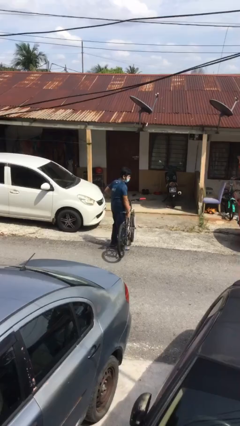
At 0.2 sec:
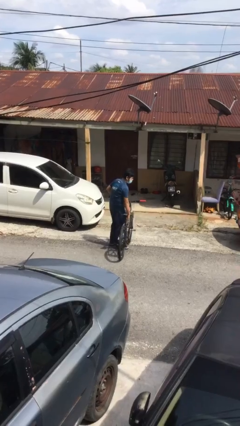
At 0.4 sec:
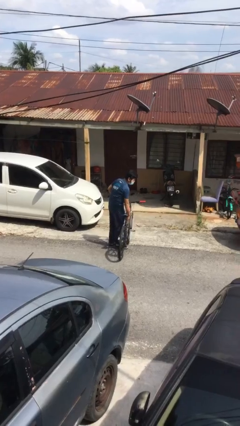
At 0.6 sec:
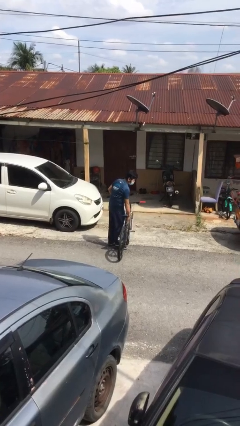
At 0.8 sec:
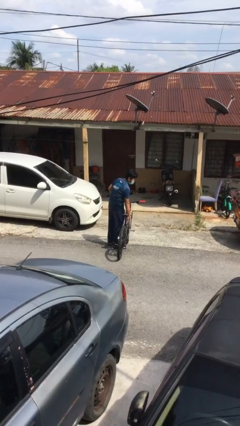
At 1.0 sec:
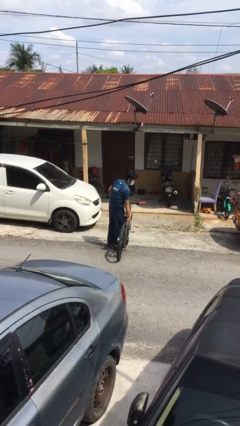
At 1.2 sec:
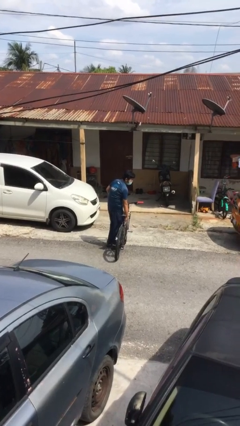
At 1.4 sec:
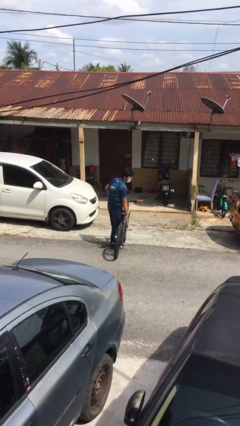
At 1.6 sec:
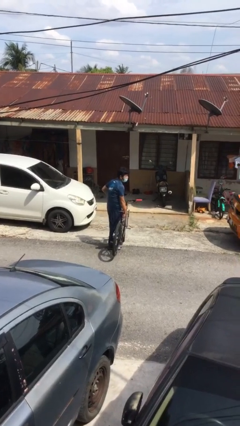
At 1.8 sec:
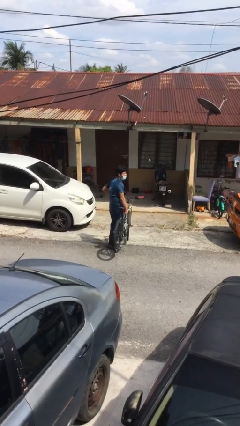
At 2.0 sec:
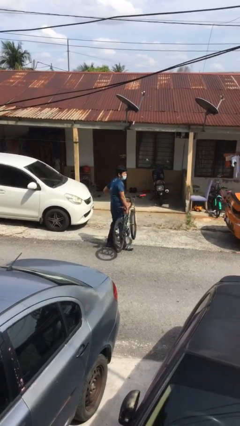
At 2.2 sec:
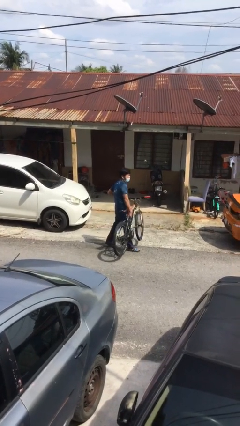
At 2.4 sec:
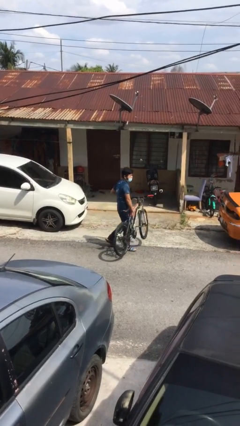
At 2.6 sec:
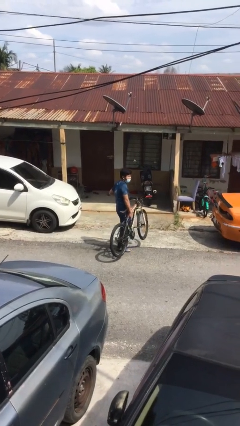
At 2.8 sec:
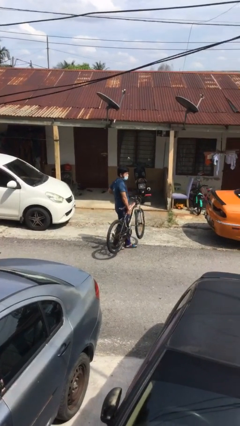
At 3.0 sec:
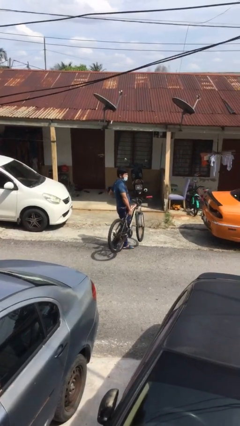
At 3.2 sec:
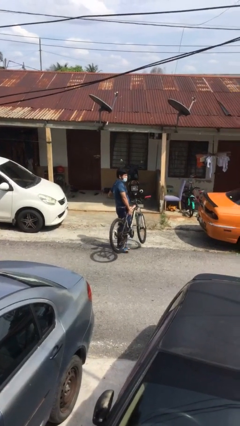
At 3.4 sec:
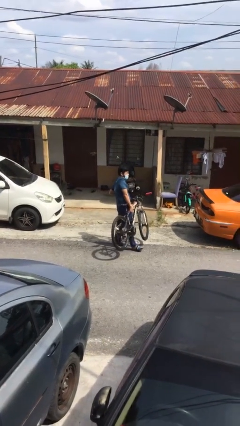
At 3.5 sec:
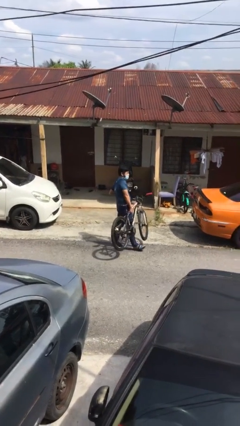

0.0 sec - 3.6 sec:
person carries bicycle

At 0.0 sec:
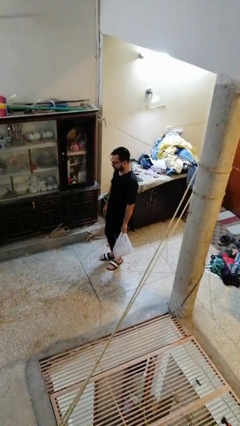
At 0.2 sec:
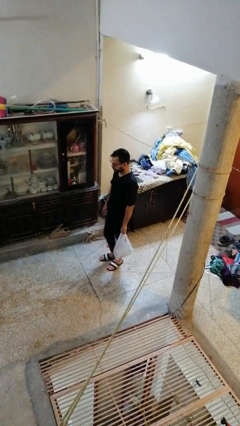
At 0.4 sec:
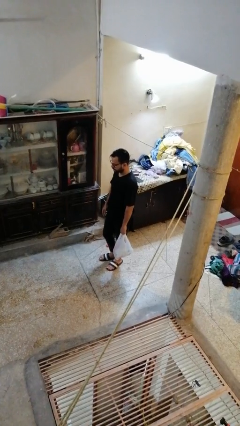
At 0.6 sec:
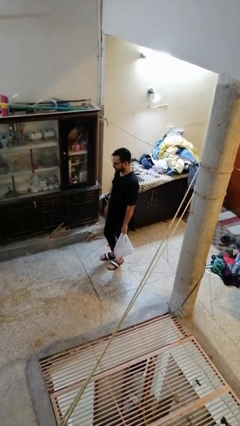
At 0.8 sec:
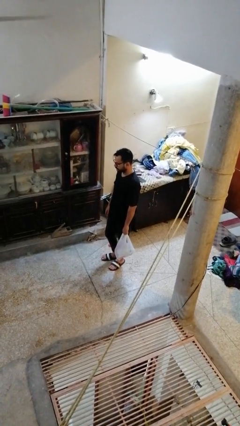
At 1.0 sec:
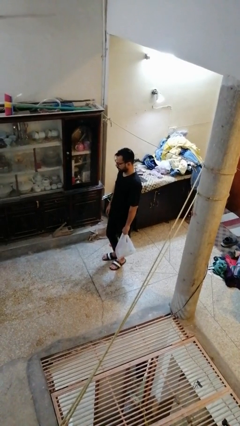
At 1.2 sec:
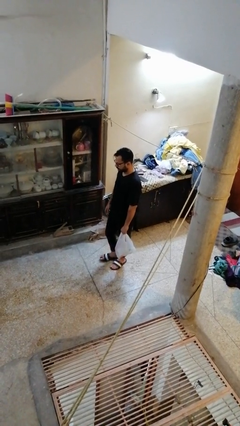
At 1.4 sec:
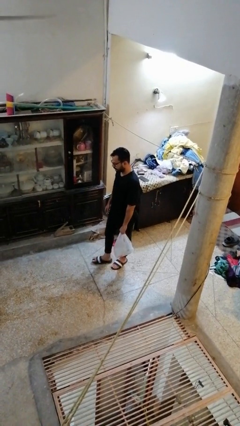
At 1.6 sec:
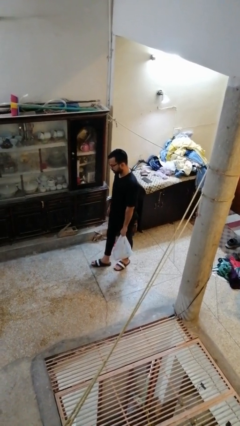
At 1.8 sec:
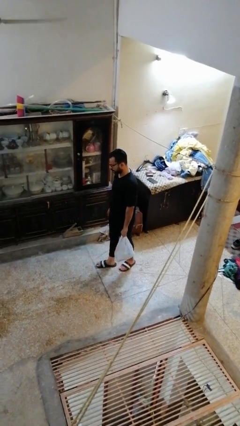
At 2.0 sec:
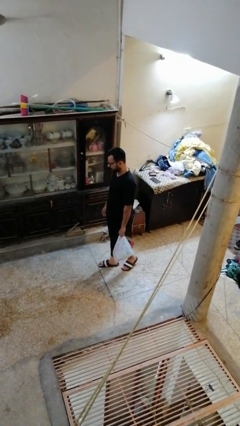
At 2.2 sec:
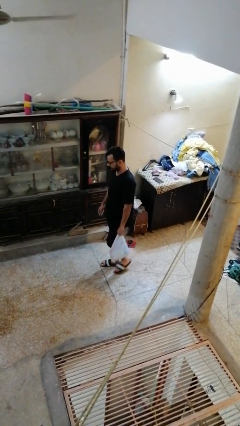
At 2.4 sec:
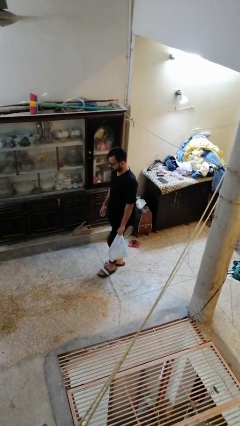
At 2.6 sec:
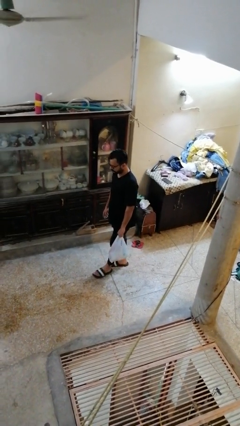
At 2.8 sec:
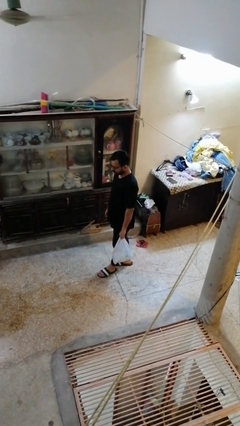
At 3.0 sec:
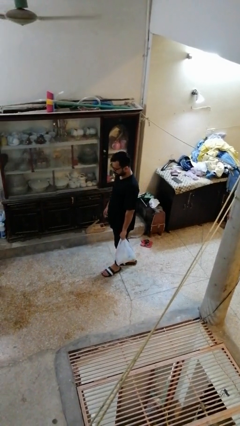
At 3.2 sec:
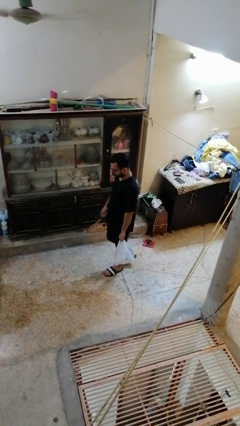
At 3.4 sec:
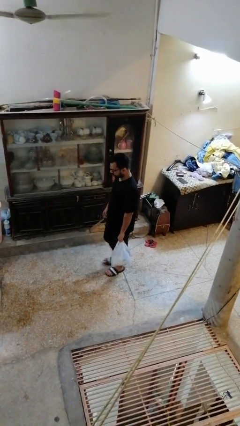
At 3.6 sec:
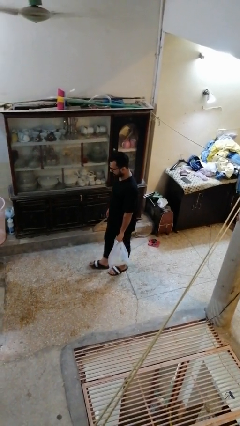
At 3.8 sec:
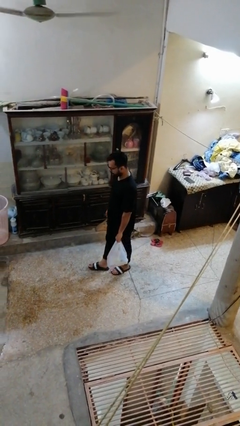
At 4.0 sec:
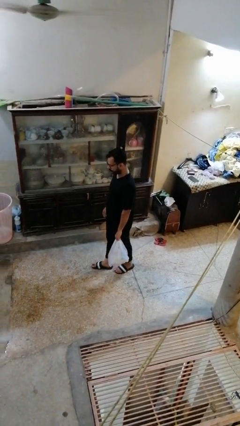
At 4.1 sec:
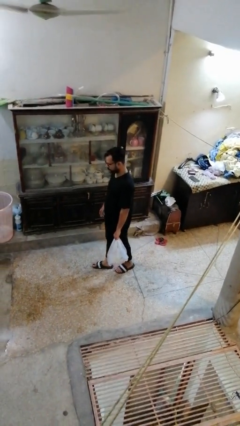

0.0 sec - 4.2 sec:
person carries groceries

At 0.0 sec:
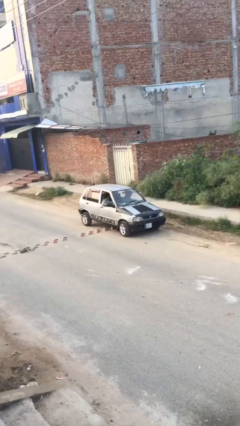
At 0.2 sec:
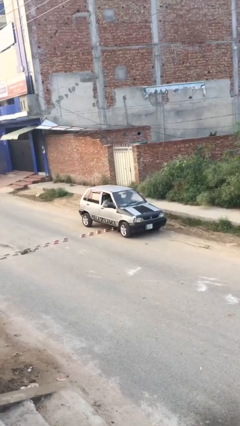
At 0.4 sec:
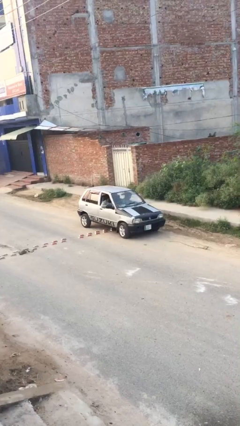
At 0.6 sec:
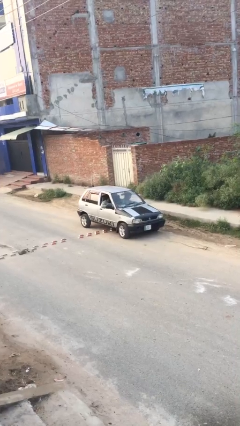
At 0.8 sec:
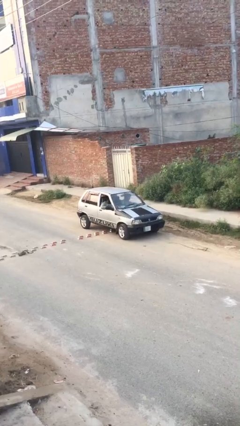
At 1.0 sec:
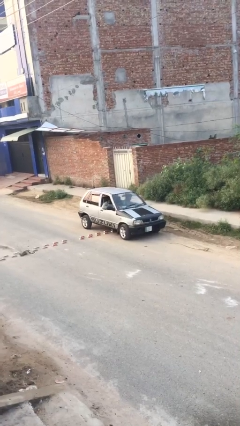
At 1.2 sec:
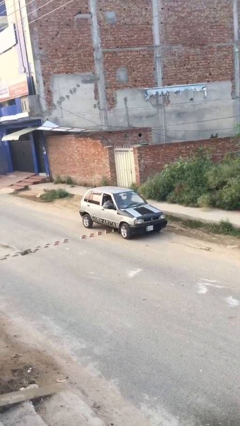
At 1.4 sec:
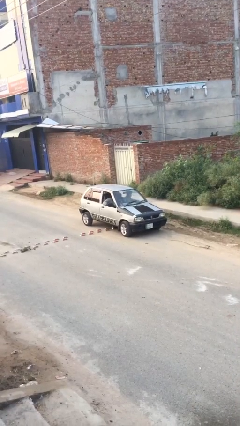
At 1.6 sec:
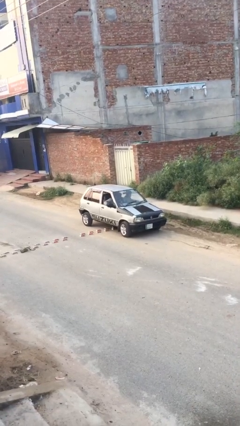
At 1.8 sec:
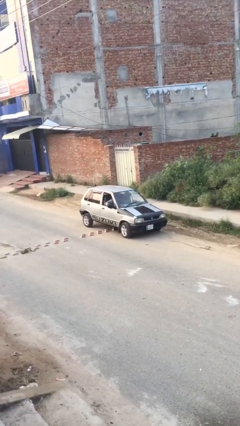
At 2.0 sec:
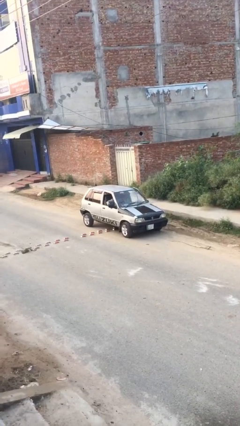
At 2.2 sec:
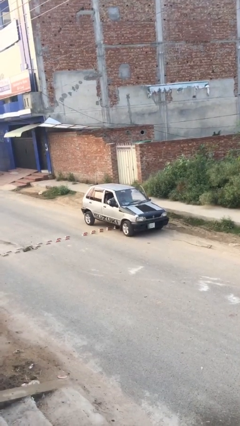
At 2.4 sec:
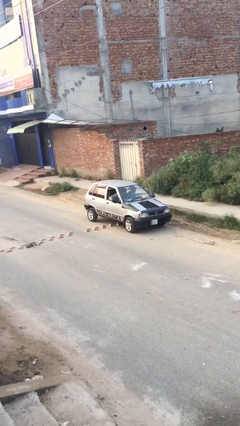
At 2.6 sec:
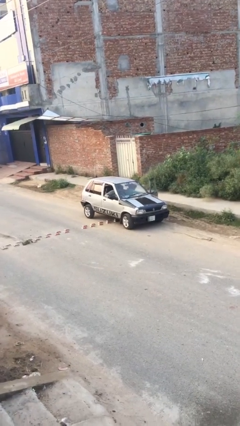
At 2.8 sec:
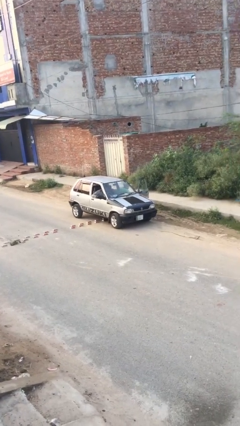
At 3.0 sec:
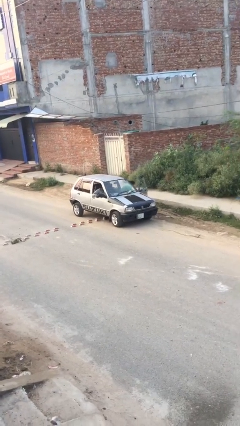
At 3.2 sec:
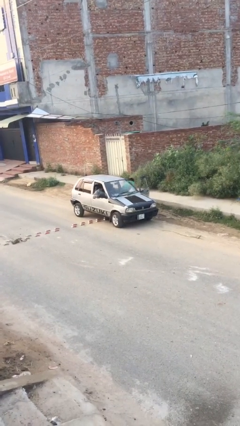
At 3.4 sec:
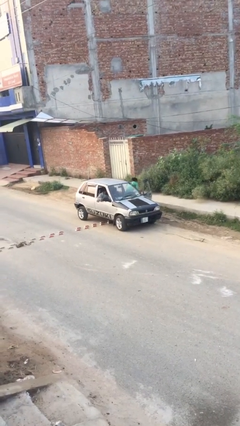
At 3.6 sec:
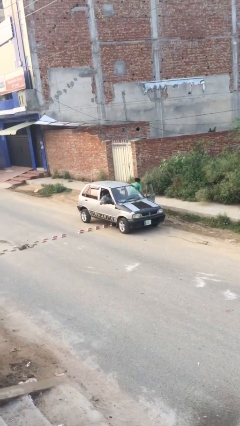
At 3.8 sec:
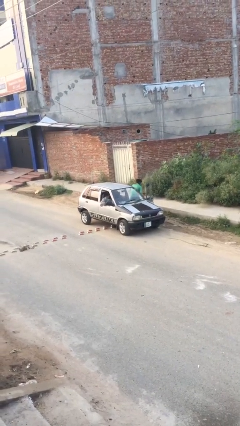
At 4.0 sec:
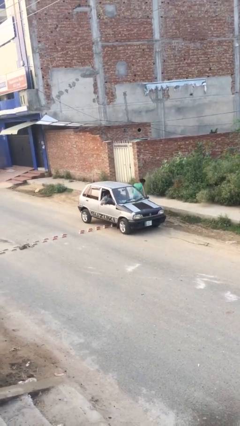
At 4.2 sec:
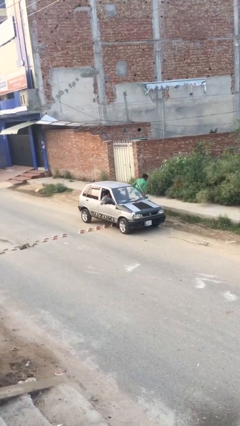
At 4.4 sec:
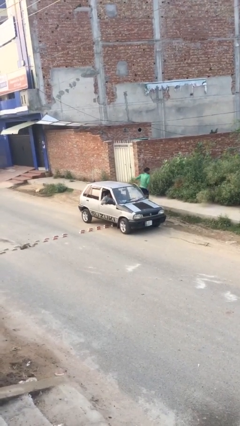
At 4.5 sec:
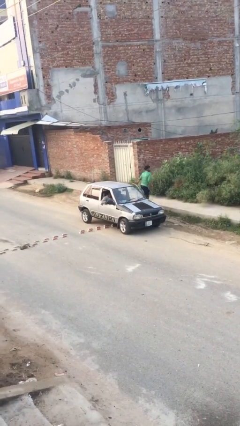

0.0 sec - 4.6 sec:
car drops off person

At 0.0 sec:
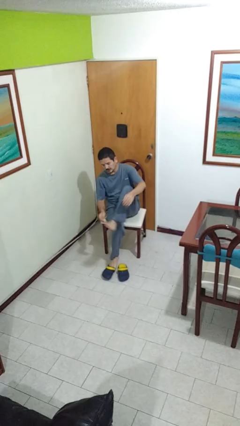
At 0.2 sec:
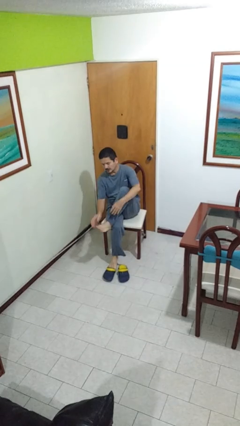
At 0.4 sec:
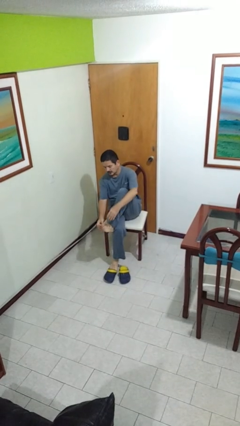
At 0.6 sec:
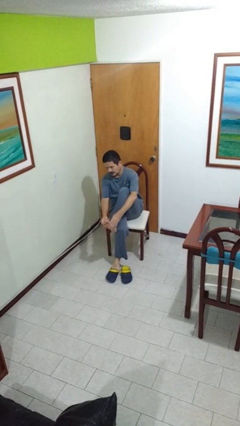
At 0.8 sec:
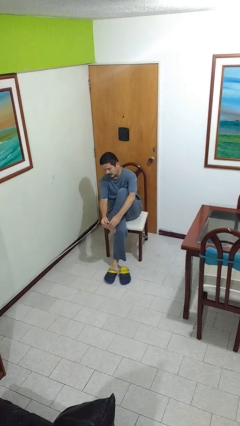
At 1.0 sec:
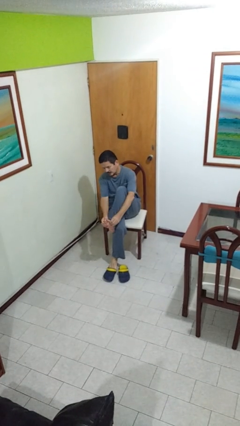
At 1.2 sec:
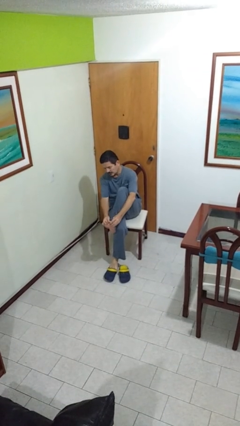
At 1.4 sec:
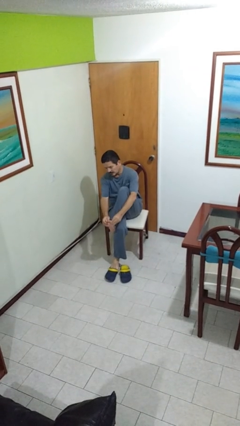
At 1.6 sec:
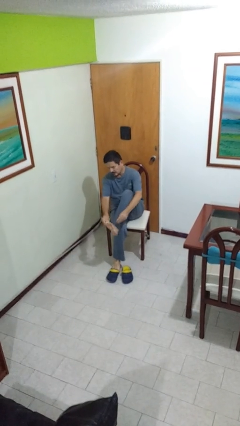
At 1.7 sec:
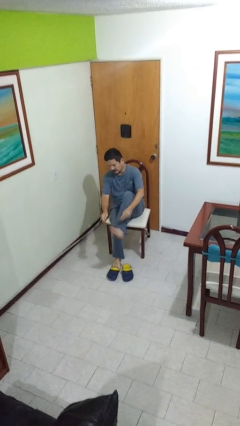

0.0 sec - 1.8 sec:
person rubs foot

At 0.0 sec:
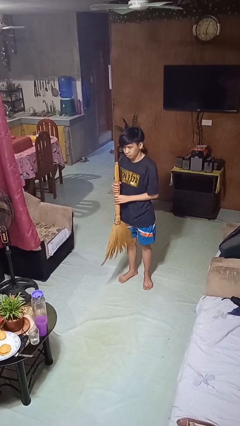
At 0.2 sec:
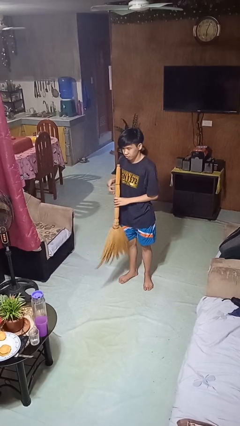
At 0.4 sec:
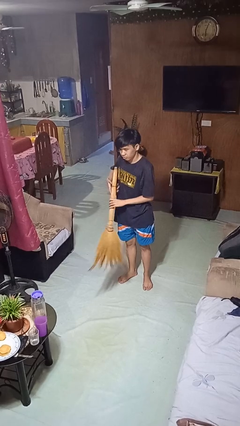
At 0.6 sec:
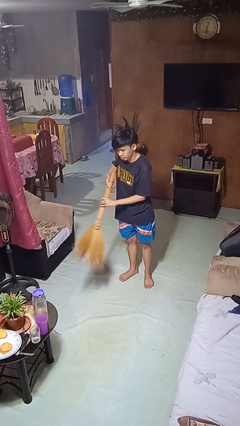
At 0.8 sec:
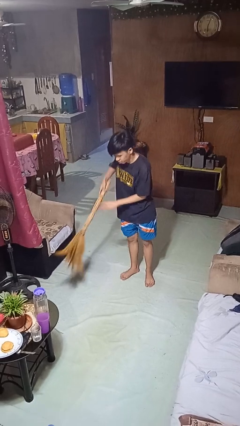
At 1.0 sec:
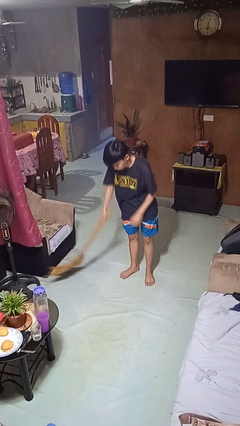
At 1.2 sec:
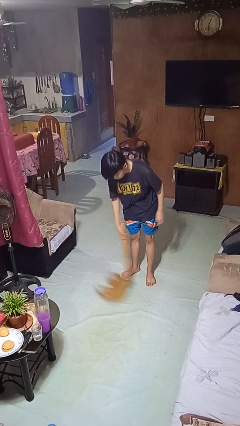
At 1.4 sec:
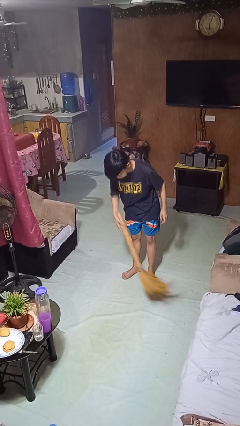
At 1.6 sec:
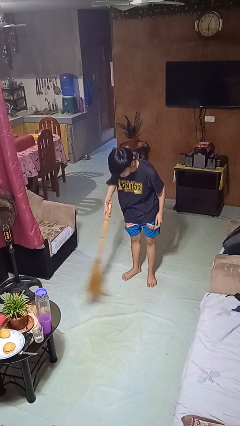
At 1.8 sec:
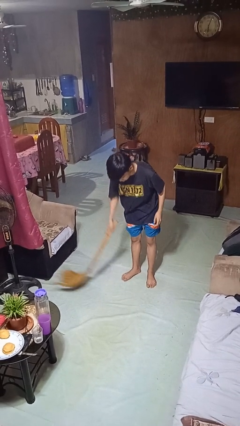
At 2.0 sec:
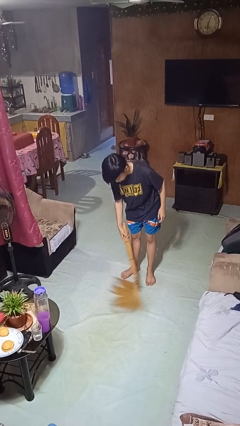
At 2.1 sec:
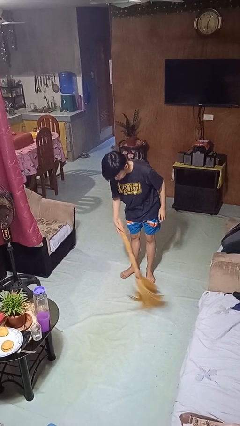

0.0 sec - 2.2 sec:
person sweeps floor

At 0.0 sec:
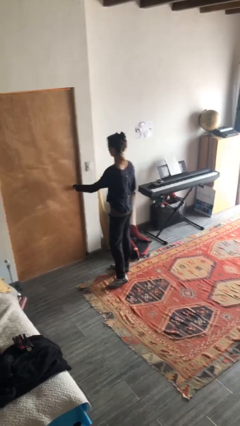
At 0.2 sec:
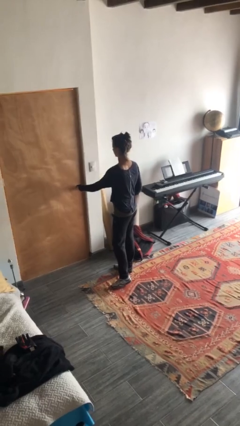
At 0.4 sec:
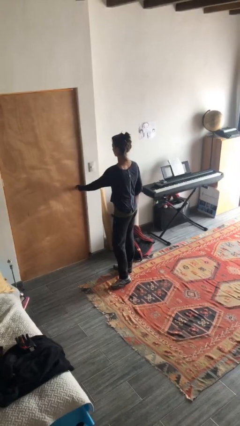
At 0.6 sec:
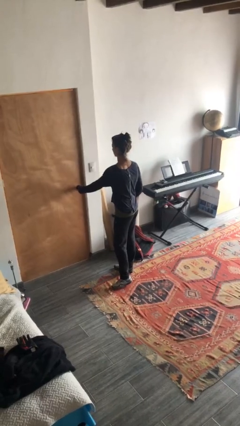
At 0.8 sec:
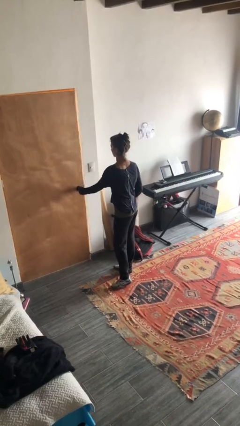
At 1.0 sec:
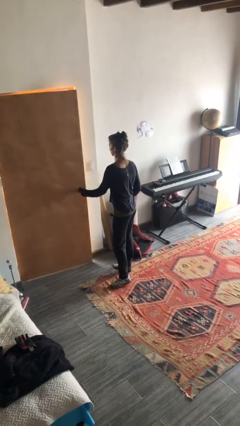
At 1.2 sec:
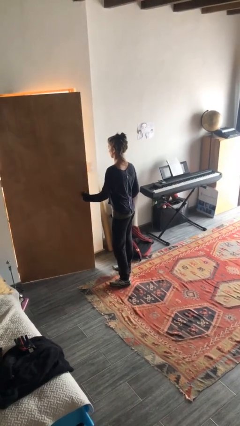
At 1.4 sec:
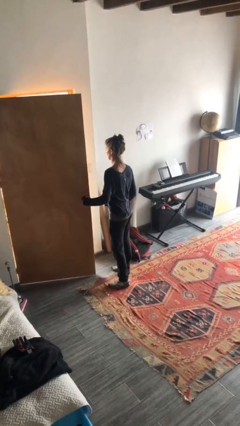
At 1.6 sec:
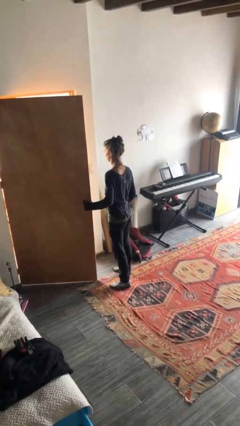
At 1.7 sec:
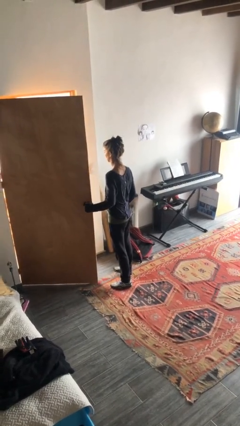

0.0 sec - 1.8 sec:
person opens facility door
